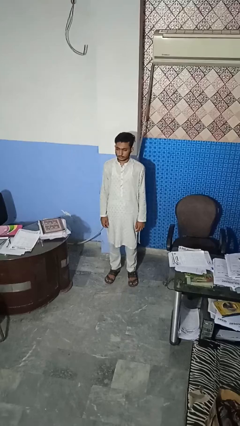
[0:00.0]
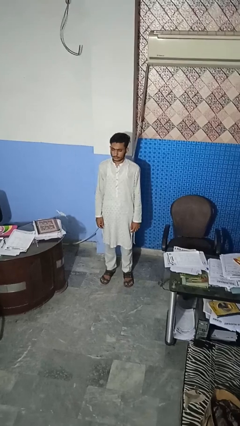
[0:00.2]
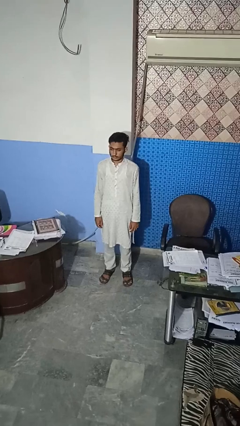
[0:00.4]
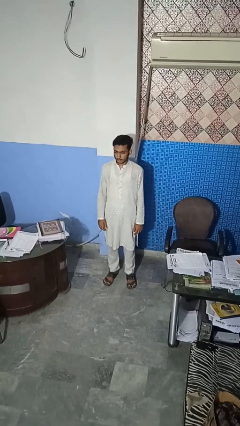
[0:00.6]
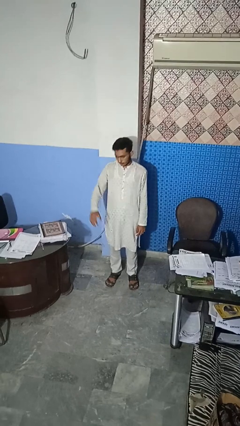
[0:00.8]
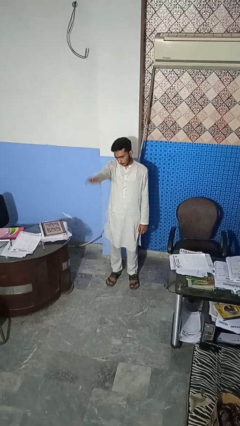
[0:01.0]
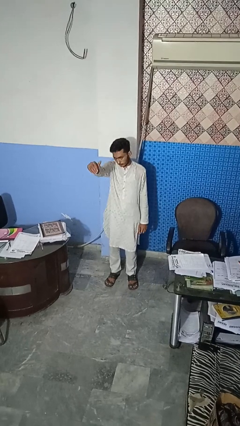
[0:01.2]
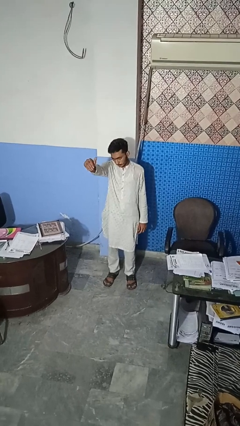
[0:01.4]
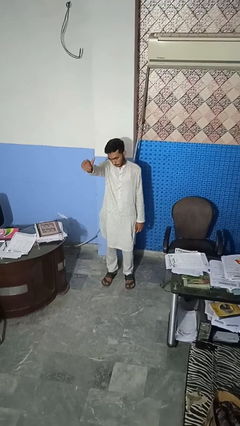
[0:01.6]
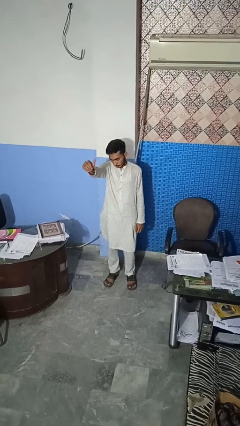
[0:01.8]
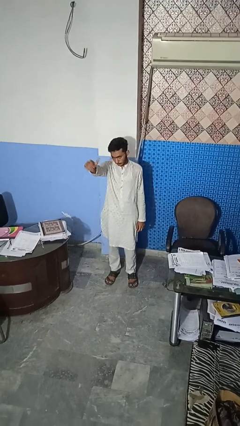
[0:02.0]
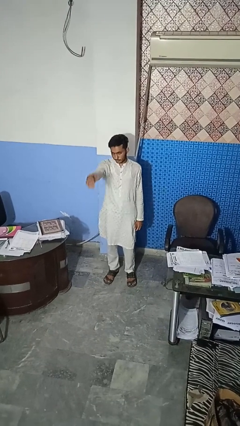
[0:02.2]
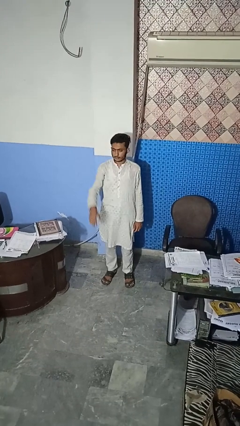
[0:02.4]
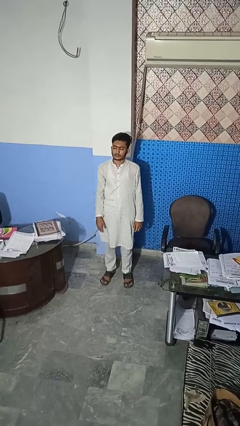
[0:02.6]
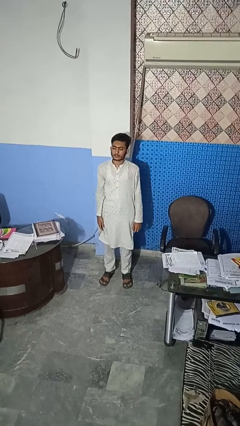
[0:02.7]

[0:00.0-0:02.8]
person gestures come here

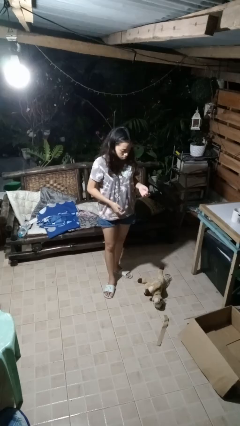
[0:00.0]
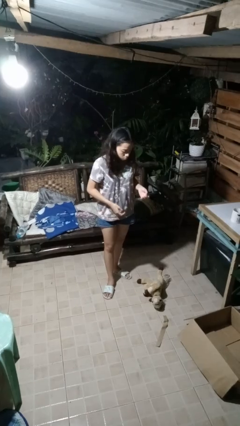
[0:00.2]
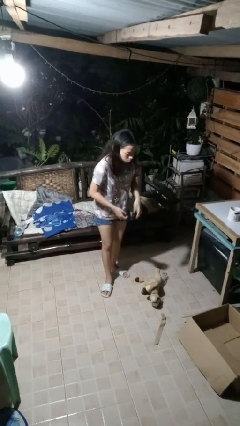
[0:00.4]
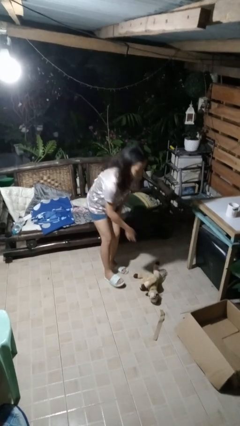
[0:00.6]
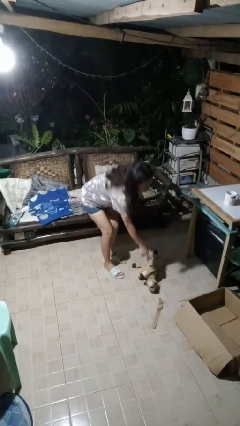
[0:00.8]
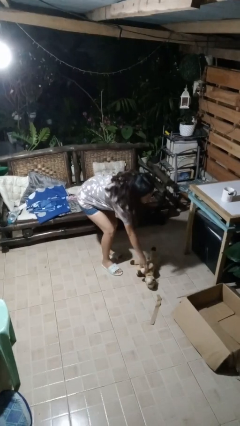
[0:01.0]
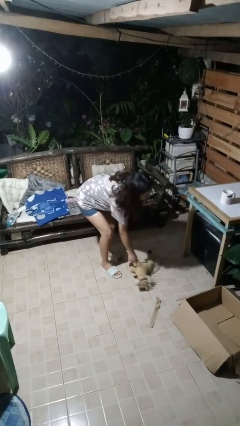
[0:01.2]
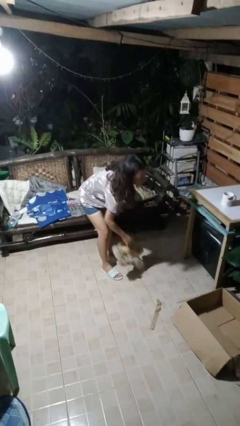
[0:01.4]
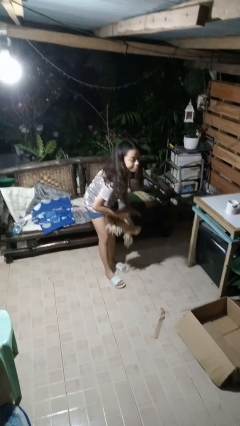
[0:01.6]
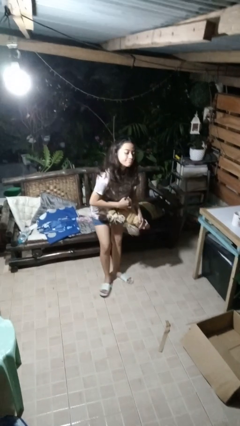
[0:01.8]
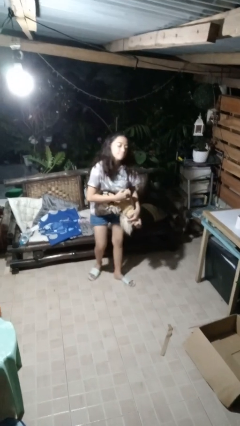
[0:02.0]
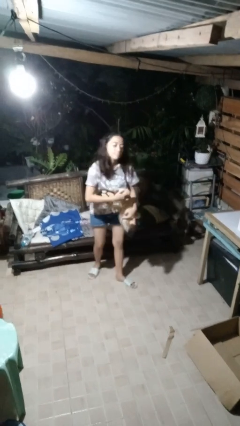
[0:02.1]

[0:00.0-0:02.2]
person picks up object from floor

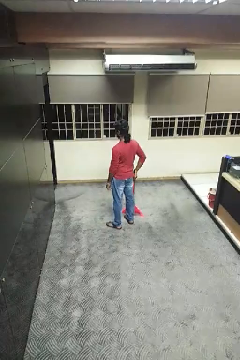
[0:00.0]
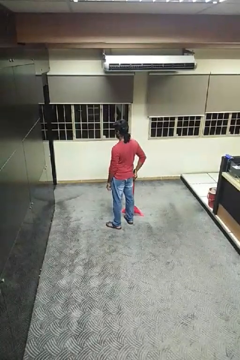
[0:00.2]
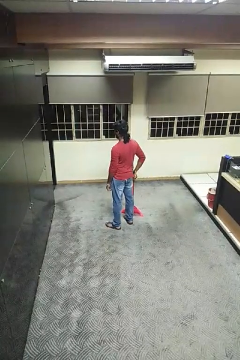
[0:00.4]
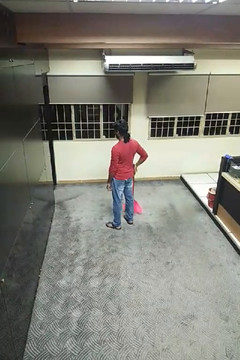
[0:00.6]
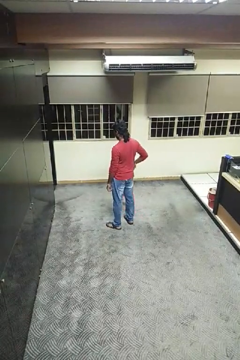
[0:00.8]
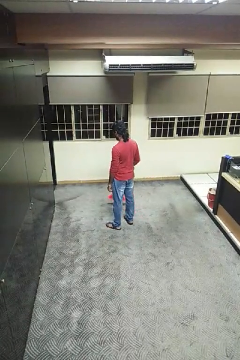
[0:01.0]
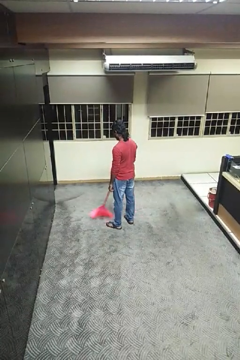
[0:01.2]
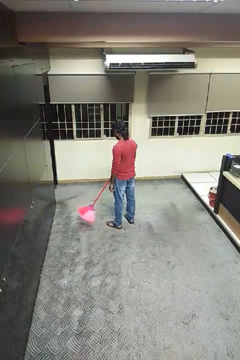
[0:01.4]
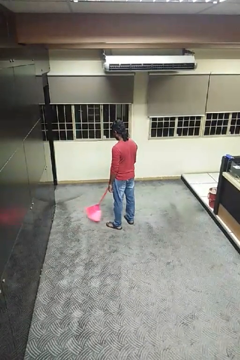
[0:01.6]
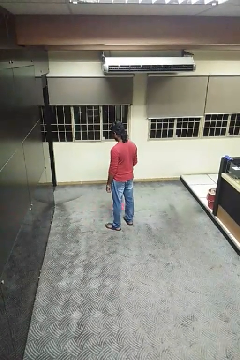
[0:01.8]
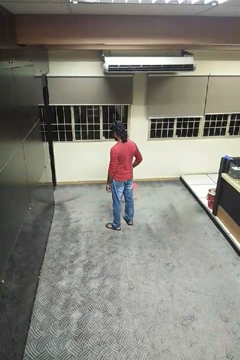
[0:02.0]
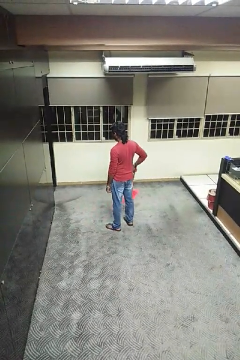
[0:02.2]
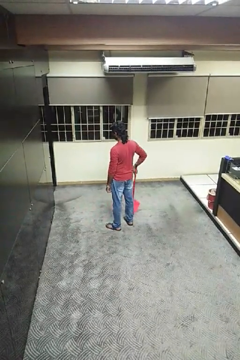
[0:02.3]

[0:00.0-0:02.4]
person sweeps floor

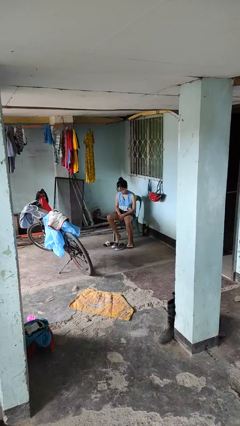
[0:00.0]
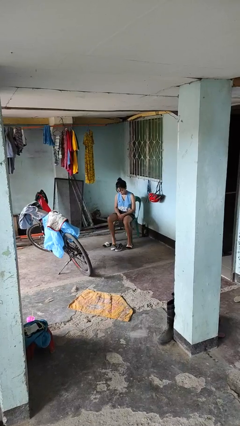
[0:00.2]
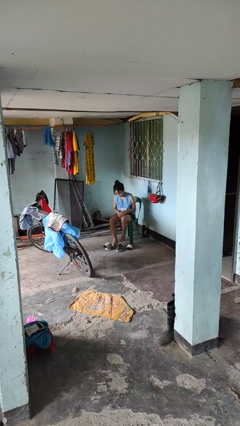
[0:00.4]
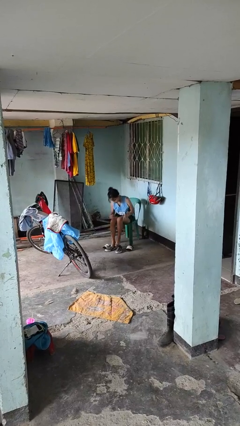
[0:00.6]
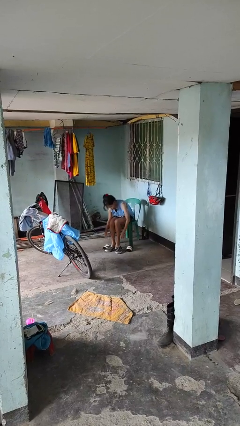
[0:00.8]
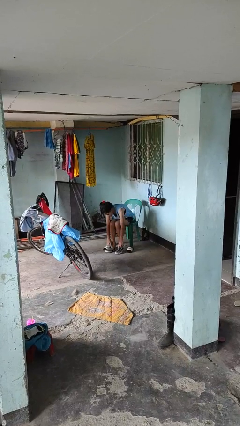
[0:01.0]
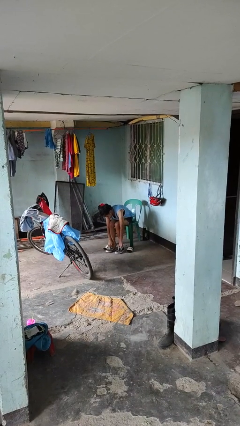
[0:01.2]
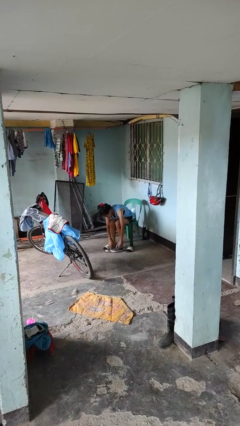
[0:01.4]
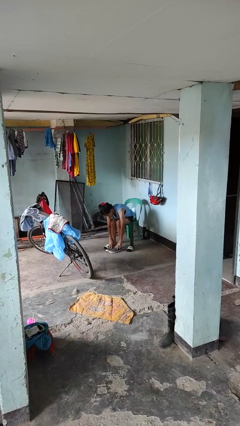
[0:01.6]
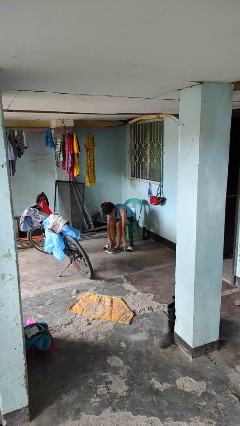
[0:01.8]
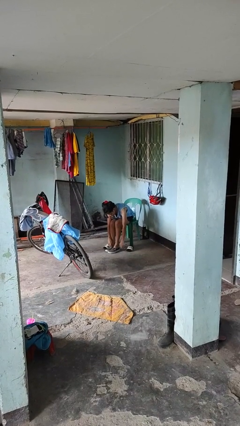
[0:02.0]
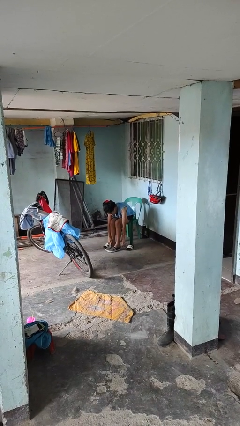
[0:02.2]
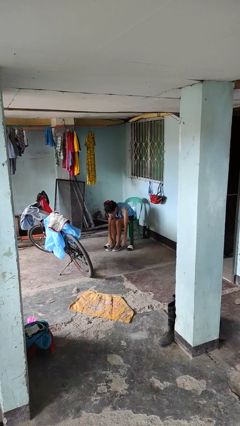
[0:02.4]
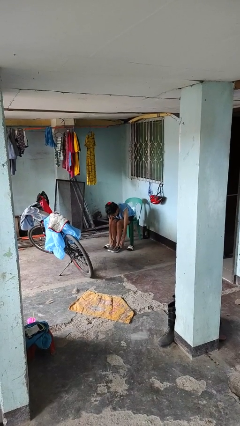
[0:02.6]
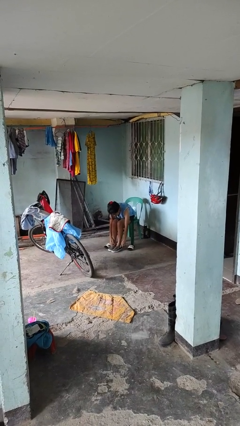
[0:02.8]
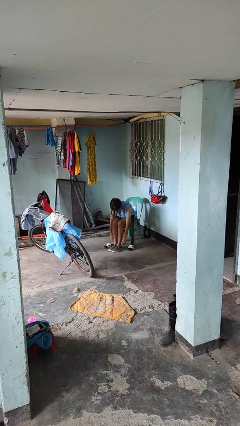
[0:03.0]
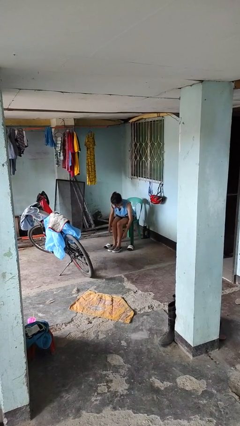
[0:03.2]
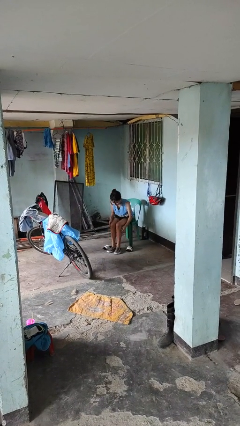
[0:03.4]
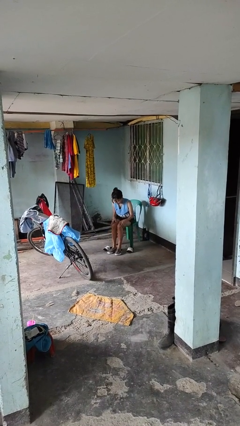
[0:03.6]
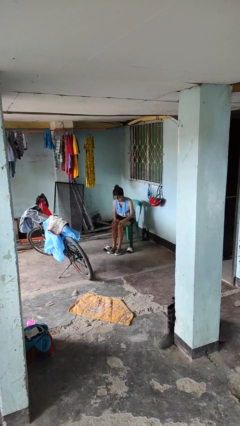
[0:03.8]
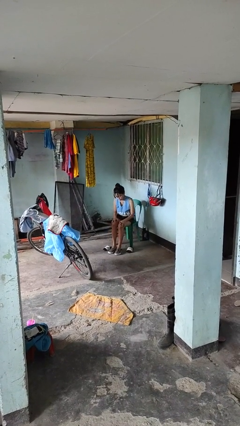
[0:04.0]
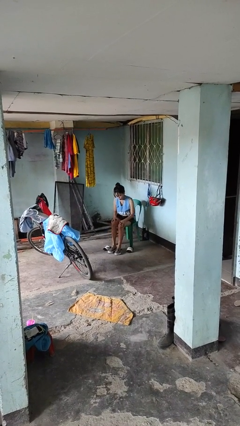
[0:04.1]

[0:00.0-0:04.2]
person puts on shoes

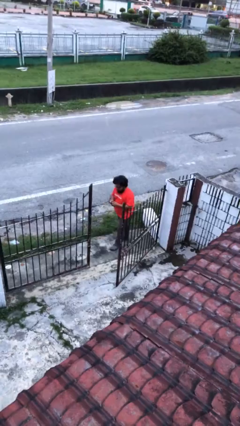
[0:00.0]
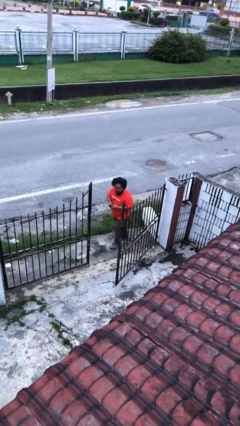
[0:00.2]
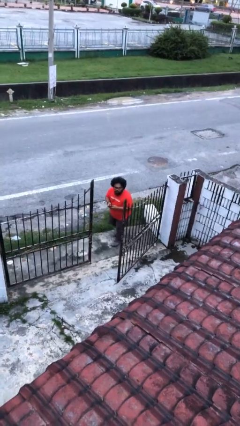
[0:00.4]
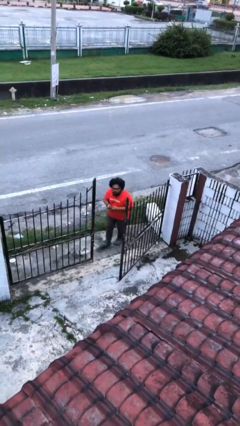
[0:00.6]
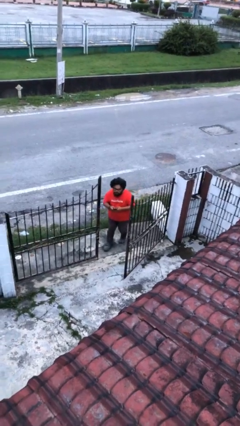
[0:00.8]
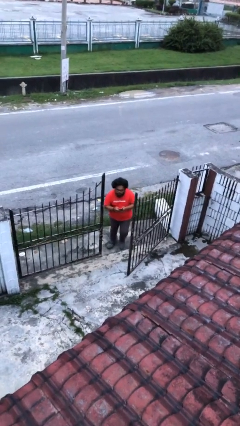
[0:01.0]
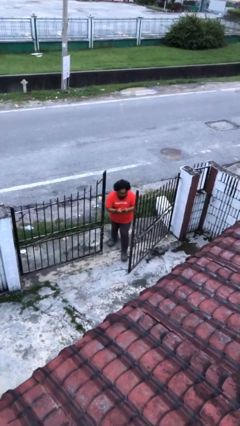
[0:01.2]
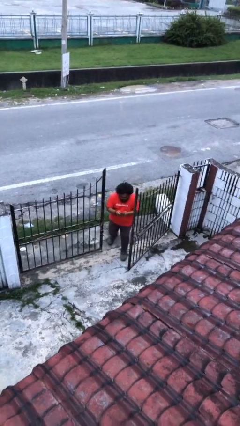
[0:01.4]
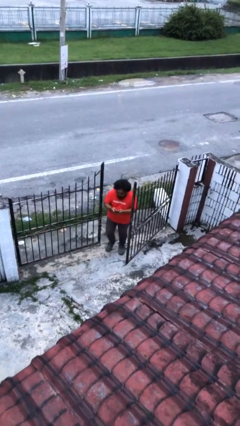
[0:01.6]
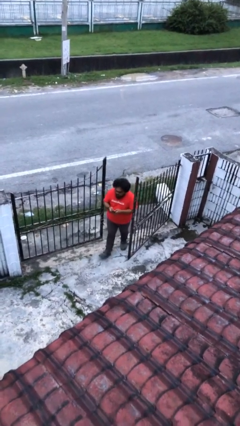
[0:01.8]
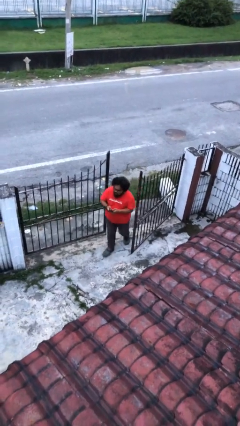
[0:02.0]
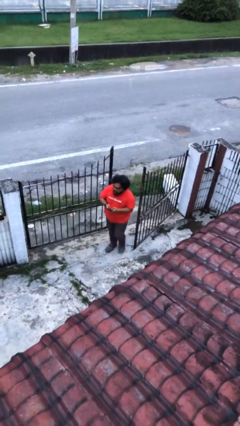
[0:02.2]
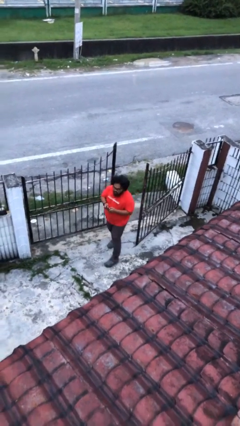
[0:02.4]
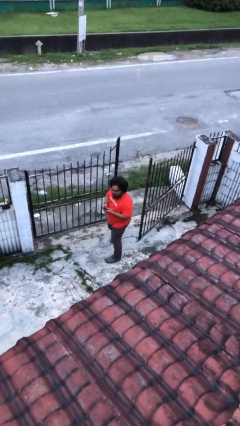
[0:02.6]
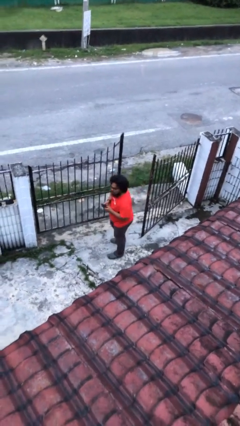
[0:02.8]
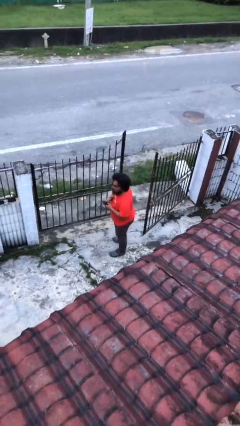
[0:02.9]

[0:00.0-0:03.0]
person enters scene through structure

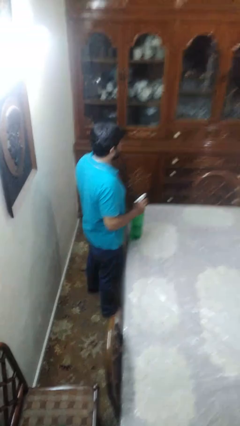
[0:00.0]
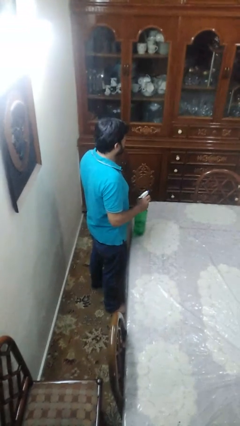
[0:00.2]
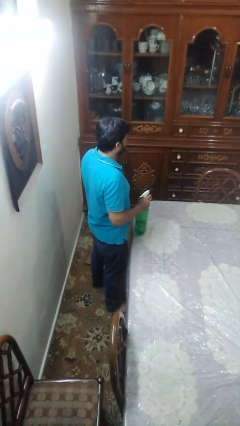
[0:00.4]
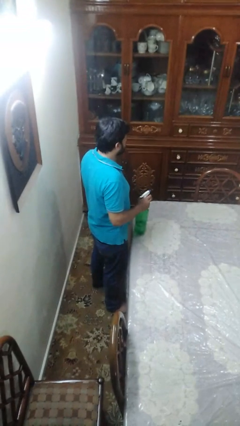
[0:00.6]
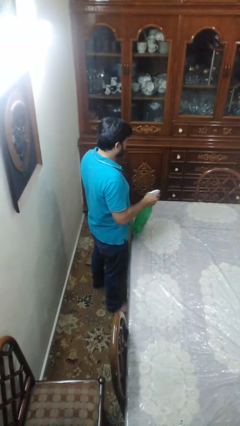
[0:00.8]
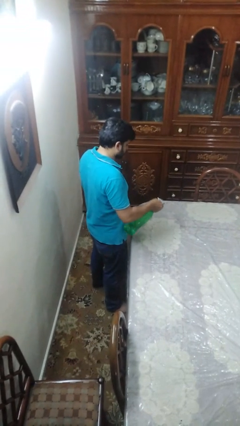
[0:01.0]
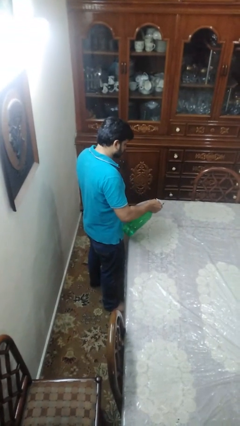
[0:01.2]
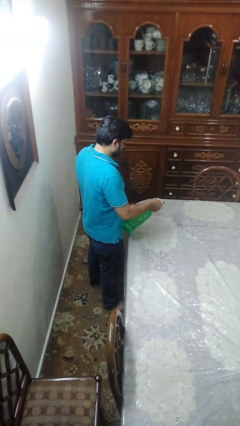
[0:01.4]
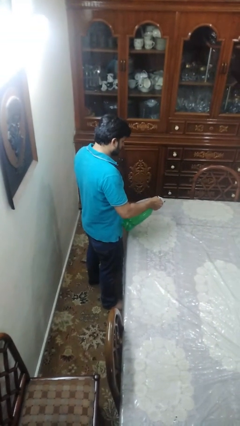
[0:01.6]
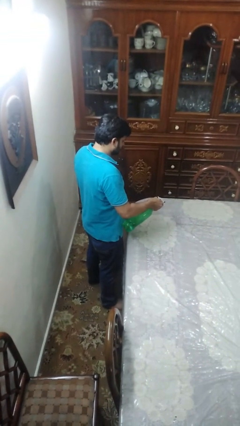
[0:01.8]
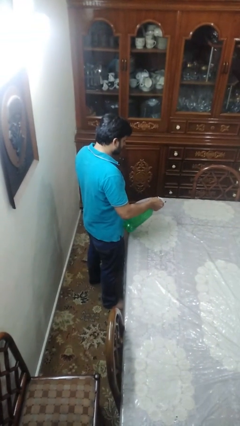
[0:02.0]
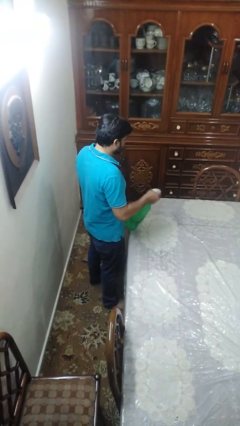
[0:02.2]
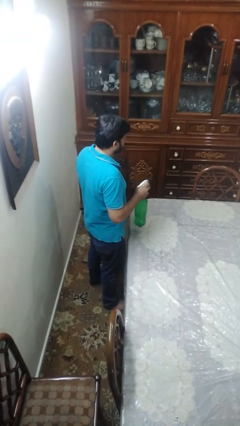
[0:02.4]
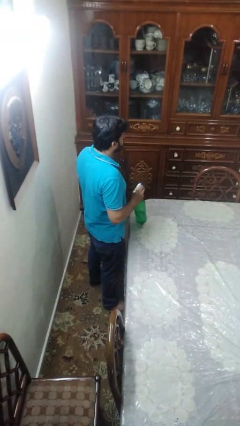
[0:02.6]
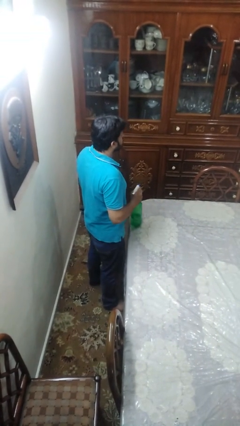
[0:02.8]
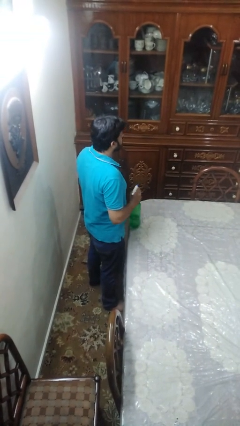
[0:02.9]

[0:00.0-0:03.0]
person sprays from bottle

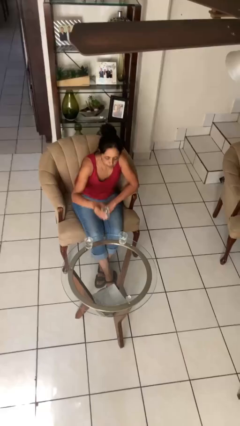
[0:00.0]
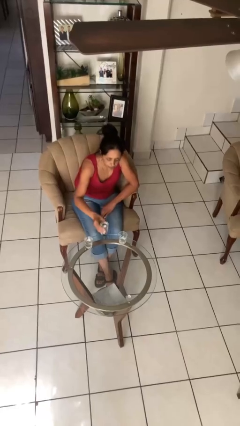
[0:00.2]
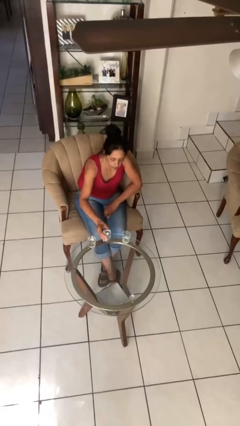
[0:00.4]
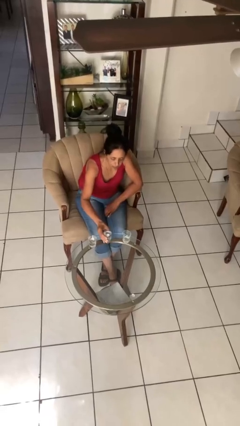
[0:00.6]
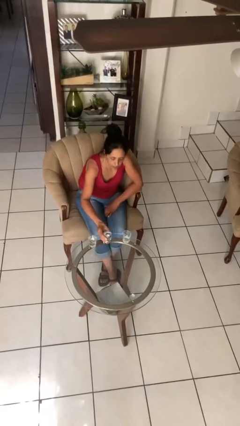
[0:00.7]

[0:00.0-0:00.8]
person puts down object on table
